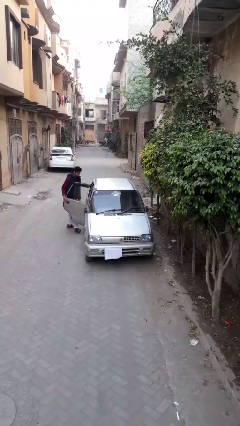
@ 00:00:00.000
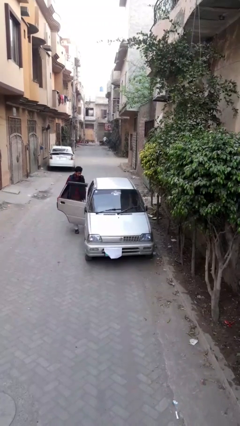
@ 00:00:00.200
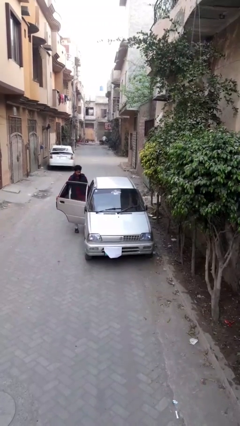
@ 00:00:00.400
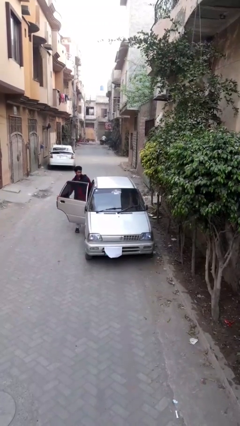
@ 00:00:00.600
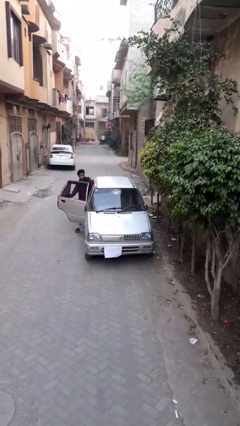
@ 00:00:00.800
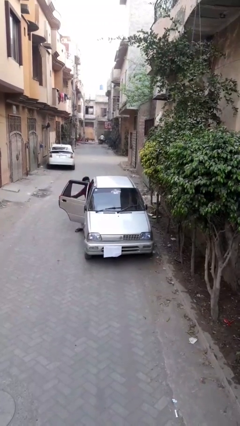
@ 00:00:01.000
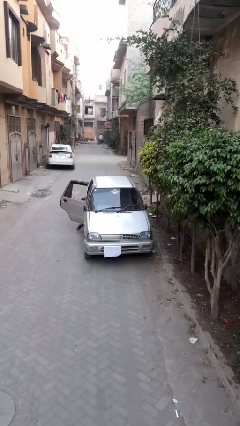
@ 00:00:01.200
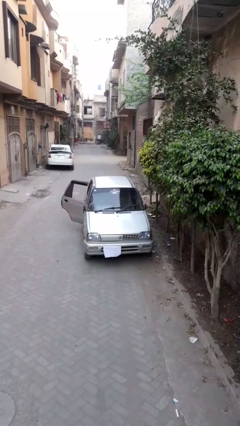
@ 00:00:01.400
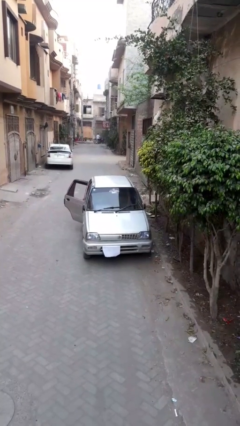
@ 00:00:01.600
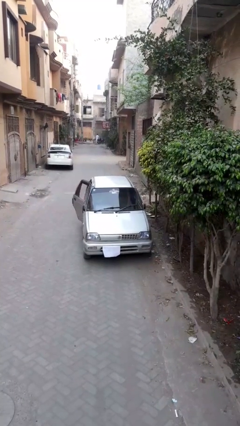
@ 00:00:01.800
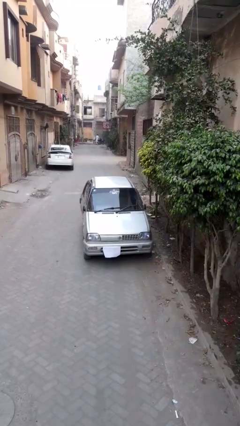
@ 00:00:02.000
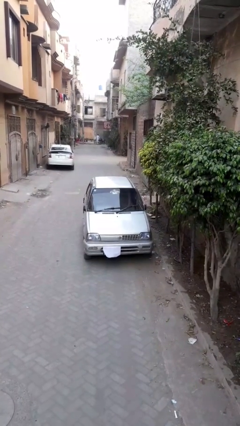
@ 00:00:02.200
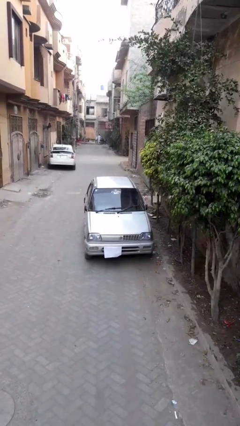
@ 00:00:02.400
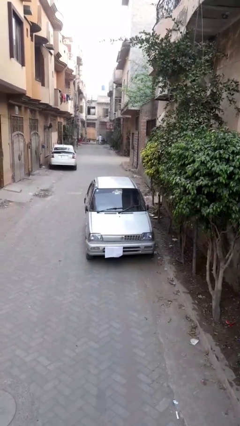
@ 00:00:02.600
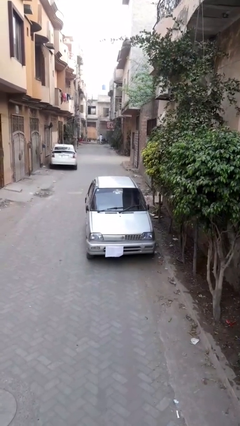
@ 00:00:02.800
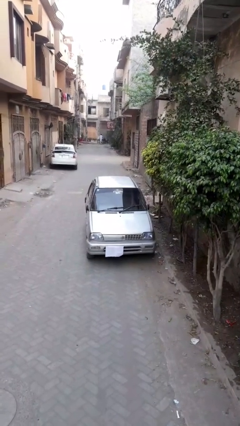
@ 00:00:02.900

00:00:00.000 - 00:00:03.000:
car picks up person

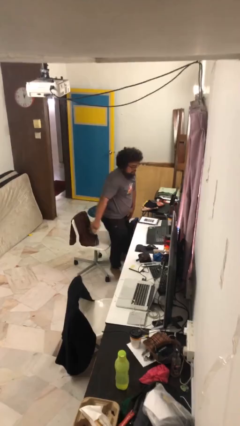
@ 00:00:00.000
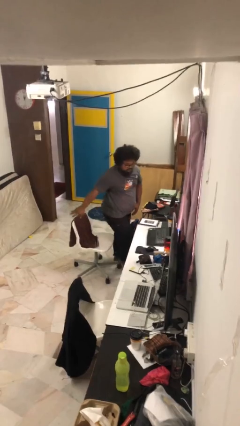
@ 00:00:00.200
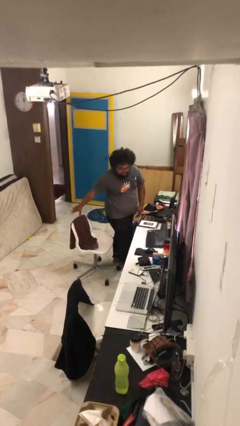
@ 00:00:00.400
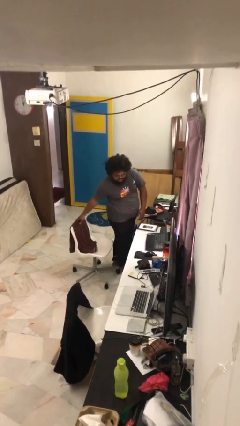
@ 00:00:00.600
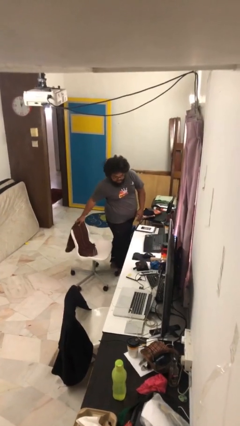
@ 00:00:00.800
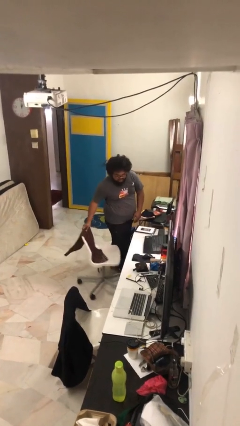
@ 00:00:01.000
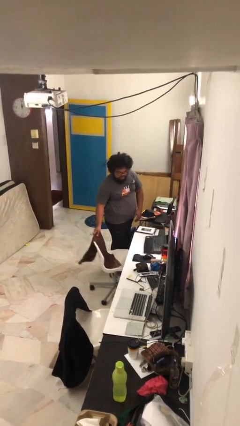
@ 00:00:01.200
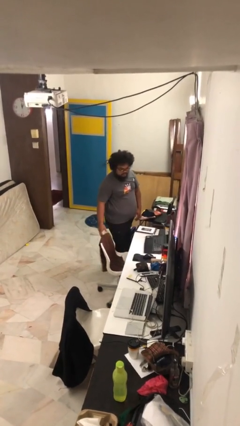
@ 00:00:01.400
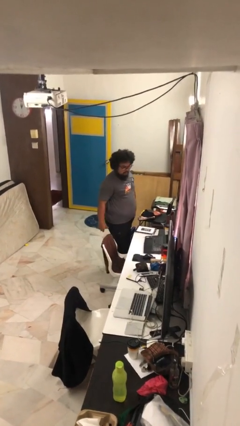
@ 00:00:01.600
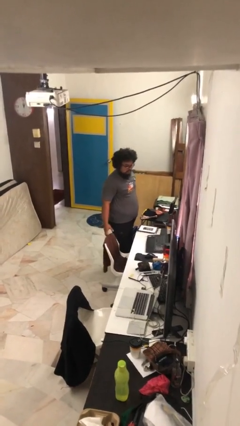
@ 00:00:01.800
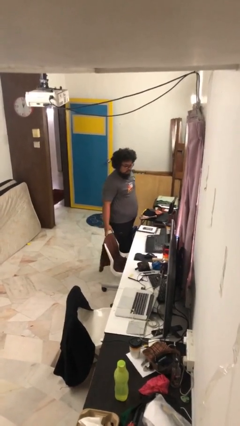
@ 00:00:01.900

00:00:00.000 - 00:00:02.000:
person stands up

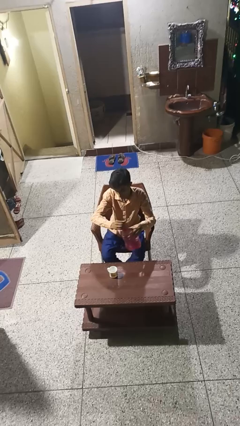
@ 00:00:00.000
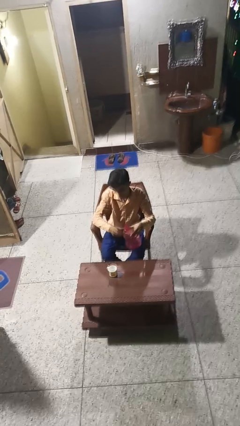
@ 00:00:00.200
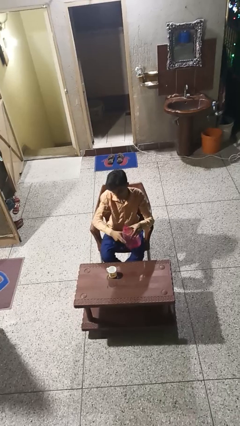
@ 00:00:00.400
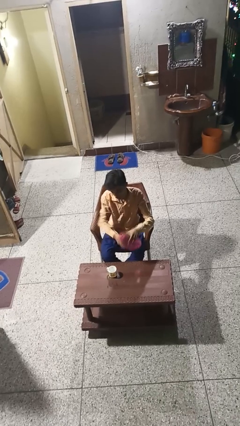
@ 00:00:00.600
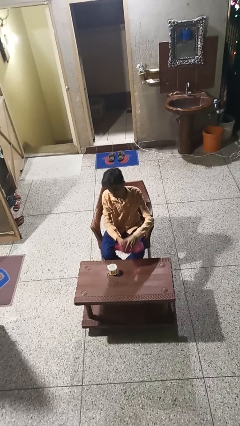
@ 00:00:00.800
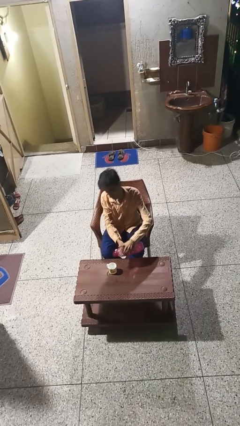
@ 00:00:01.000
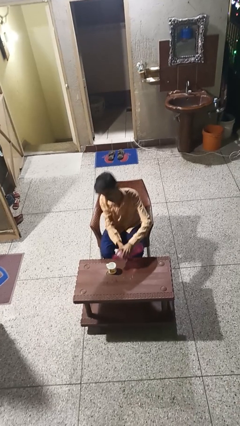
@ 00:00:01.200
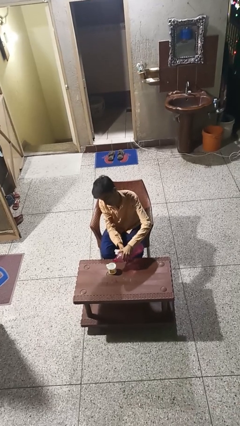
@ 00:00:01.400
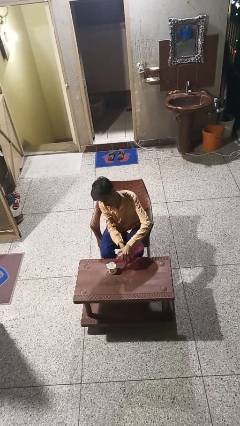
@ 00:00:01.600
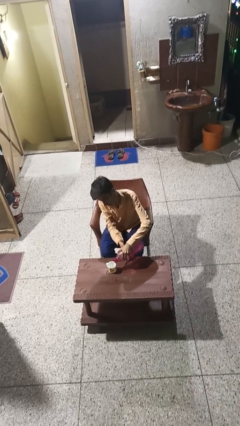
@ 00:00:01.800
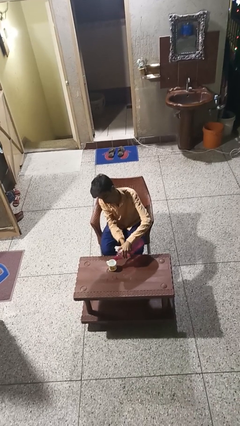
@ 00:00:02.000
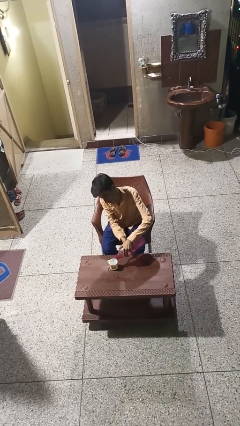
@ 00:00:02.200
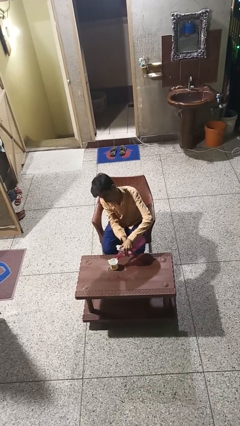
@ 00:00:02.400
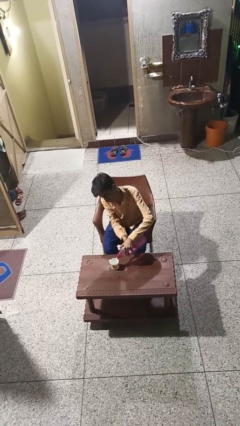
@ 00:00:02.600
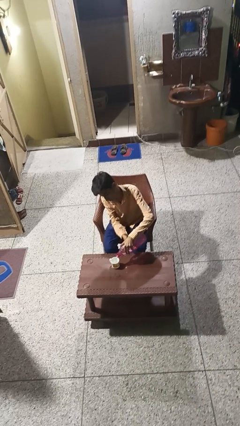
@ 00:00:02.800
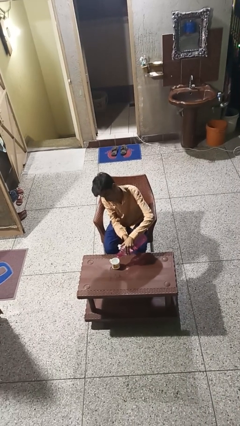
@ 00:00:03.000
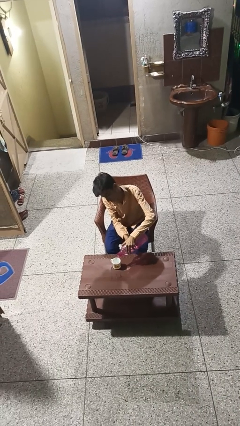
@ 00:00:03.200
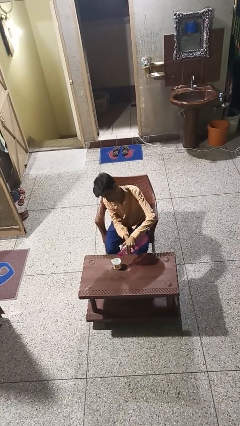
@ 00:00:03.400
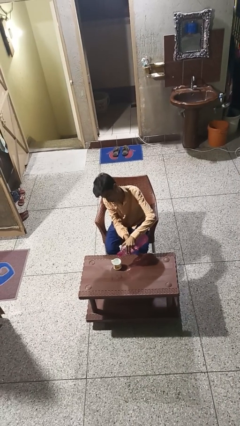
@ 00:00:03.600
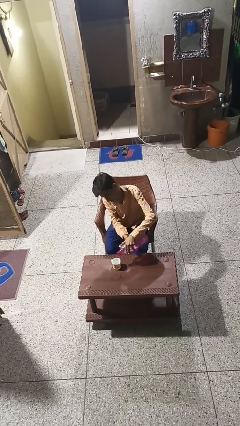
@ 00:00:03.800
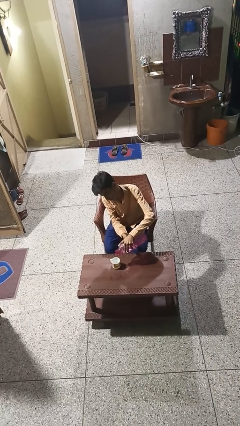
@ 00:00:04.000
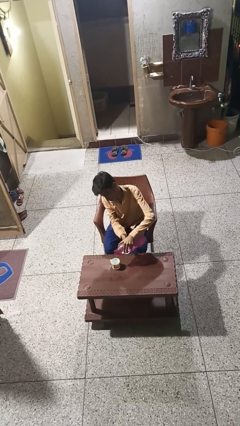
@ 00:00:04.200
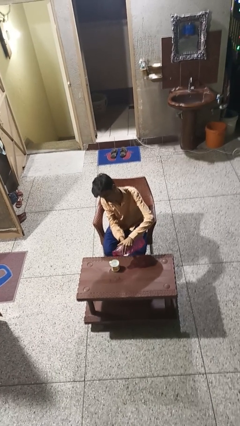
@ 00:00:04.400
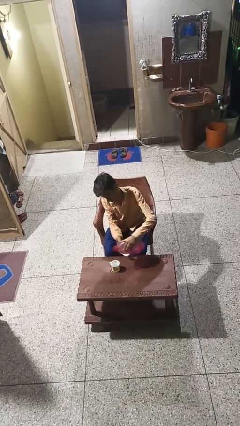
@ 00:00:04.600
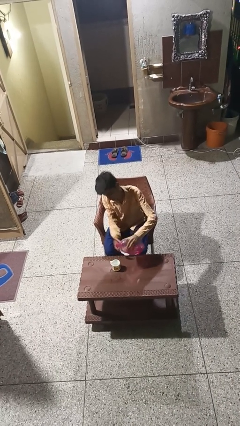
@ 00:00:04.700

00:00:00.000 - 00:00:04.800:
person pours liquid into cup

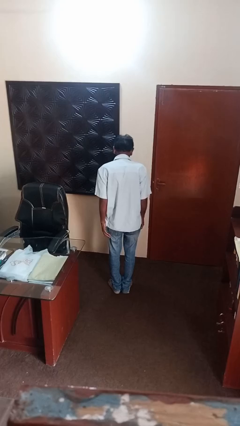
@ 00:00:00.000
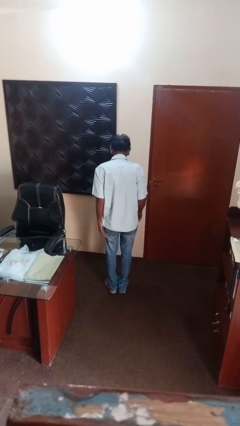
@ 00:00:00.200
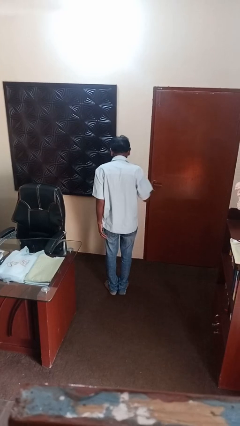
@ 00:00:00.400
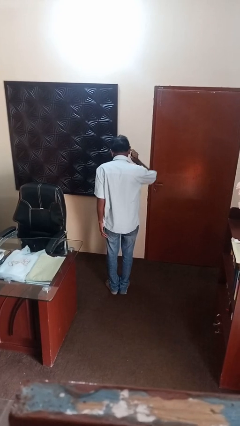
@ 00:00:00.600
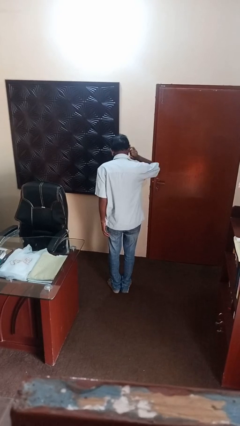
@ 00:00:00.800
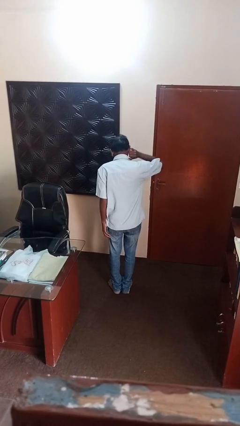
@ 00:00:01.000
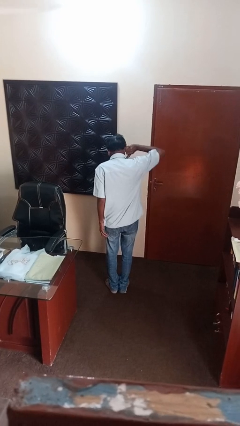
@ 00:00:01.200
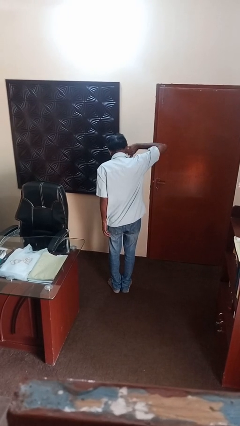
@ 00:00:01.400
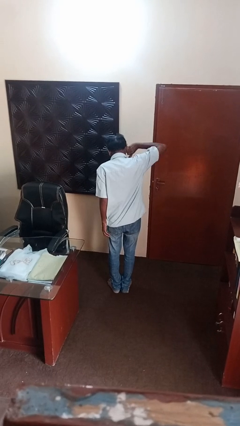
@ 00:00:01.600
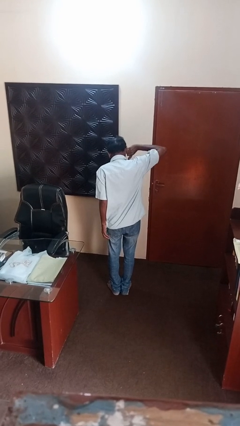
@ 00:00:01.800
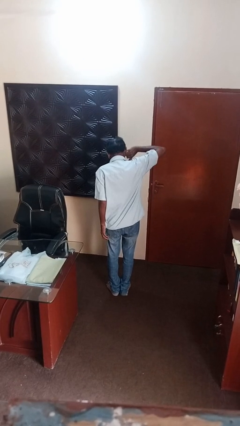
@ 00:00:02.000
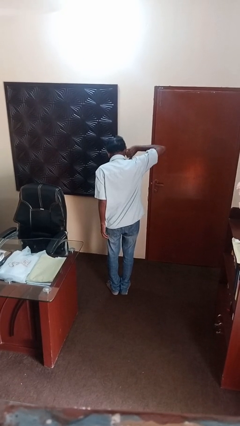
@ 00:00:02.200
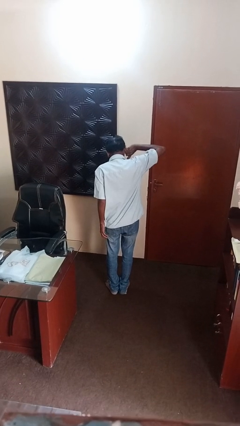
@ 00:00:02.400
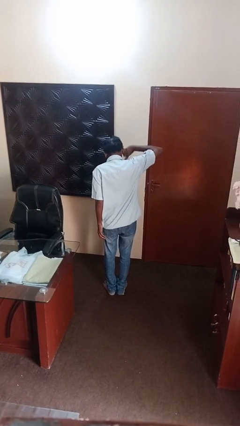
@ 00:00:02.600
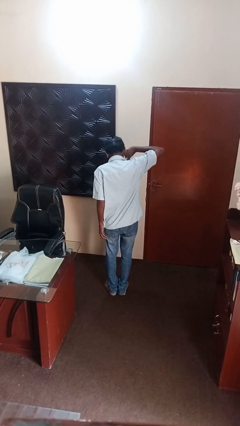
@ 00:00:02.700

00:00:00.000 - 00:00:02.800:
person puts fingers in ear

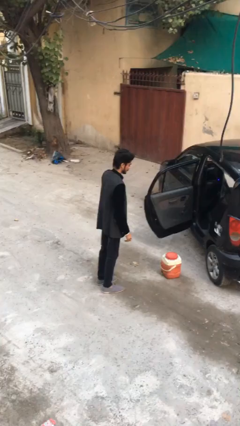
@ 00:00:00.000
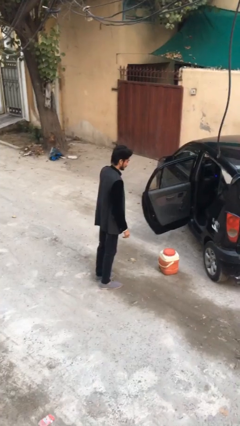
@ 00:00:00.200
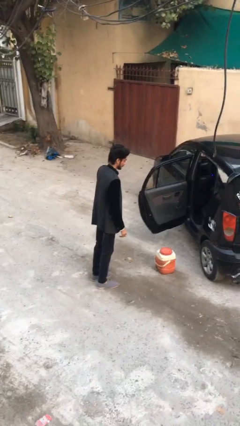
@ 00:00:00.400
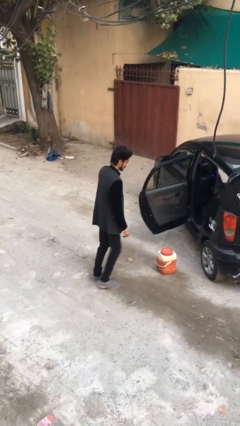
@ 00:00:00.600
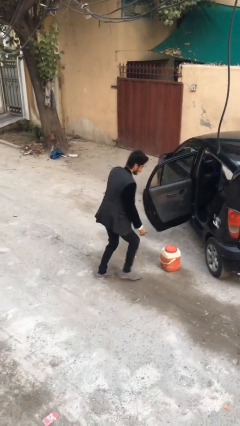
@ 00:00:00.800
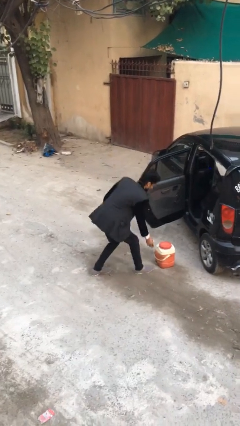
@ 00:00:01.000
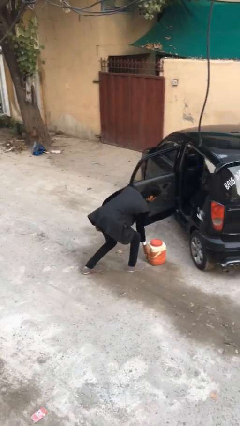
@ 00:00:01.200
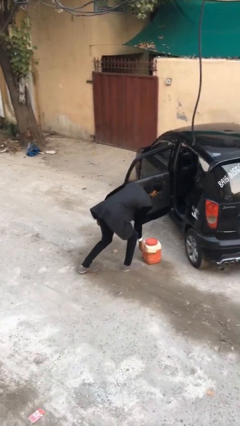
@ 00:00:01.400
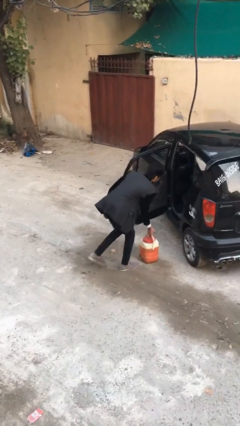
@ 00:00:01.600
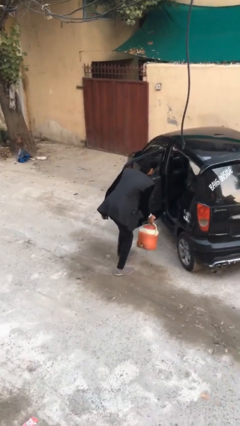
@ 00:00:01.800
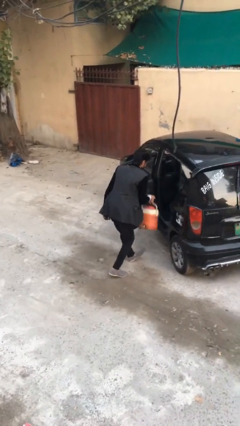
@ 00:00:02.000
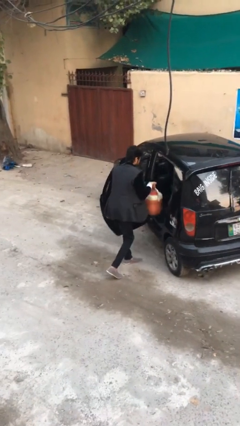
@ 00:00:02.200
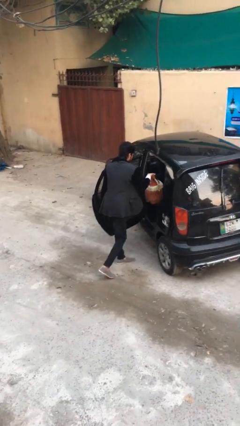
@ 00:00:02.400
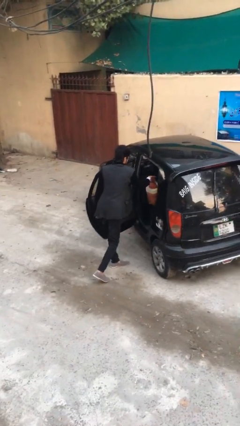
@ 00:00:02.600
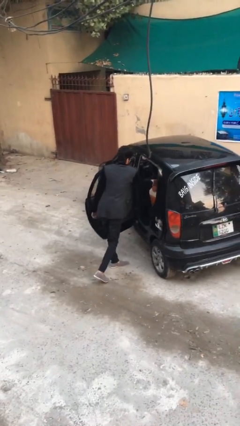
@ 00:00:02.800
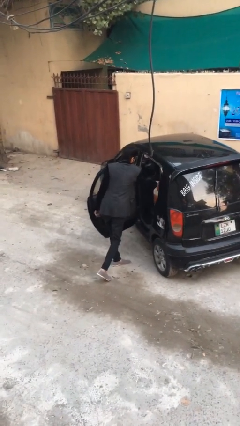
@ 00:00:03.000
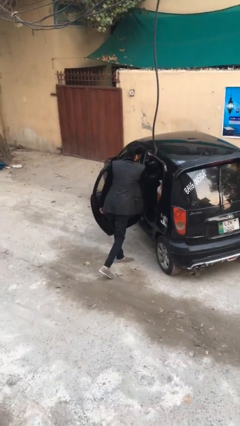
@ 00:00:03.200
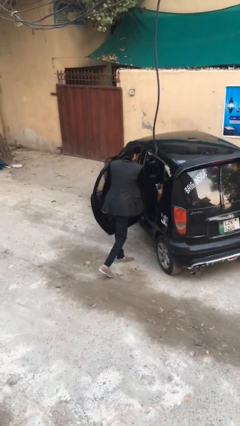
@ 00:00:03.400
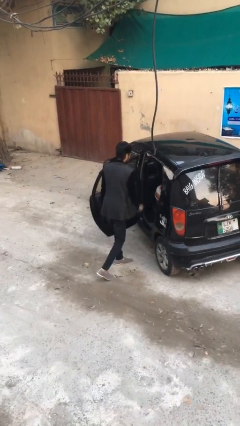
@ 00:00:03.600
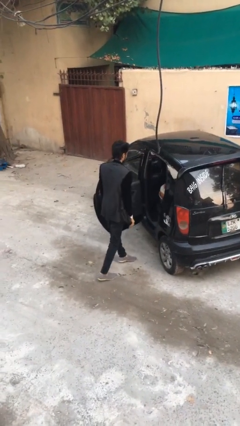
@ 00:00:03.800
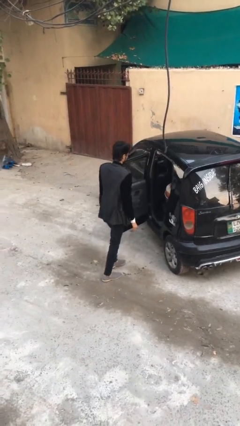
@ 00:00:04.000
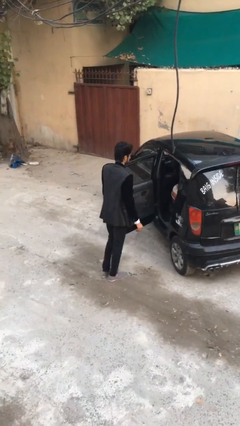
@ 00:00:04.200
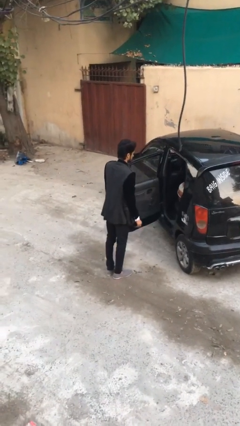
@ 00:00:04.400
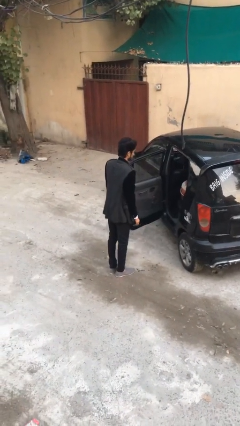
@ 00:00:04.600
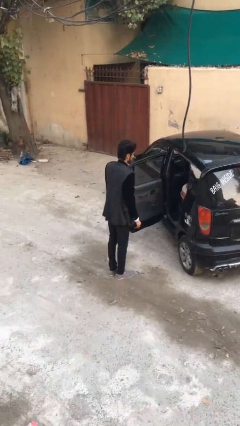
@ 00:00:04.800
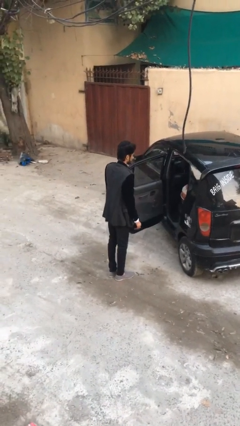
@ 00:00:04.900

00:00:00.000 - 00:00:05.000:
person loads car
